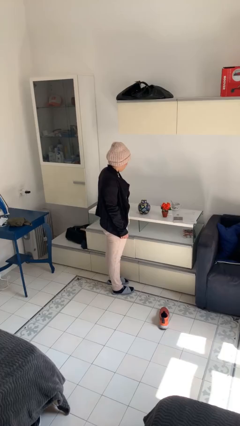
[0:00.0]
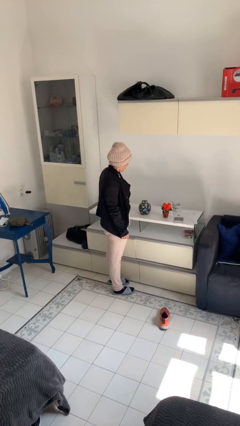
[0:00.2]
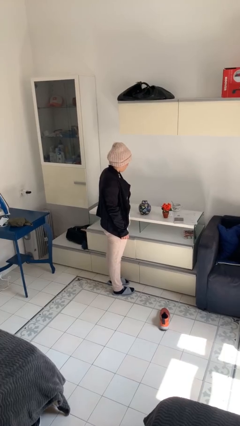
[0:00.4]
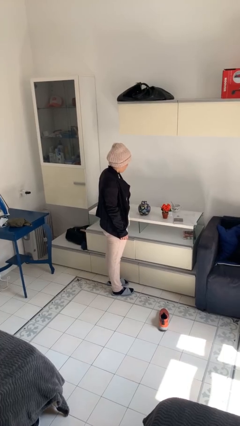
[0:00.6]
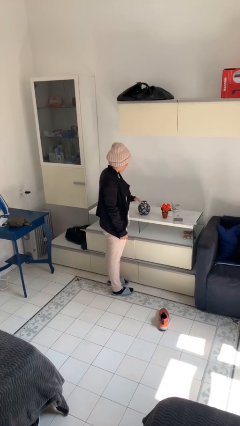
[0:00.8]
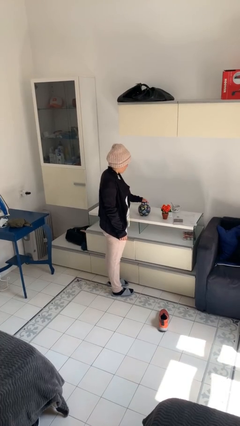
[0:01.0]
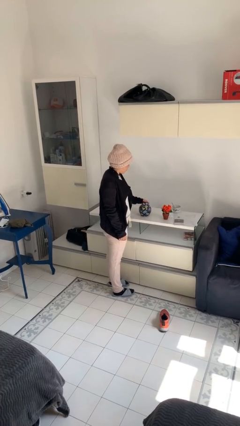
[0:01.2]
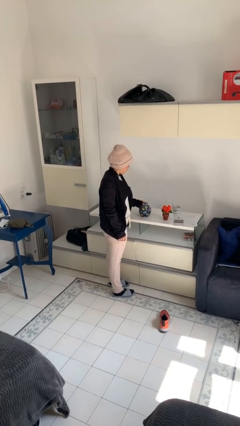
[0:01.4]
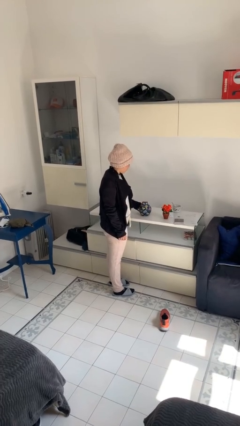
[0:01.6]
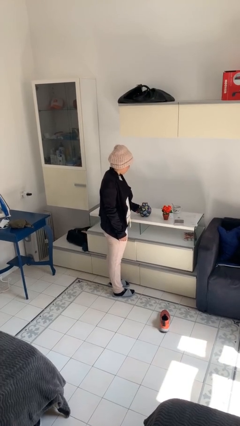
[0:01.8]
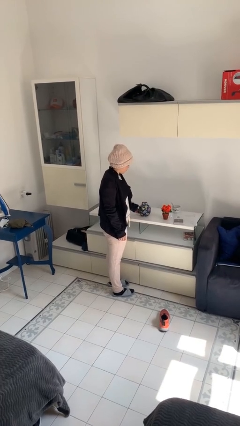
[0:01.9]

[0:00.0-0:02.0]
person waves hand over object

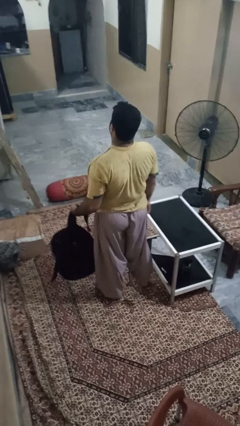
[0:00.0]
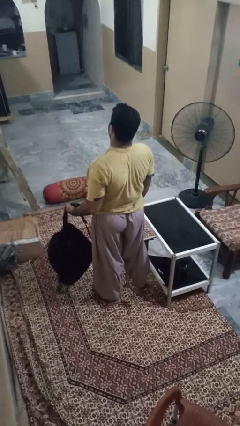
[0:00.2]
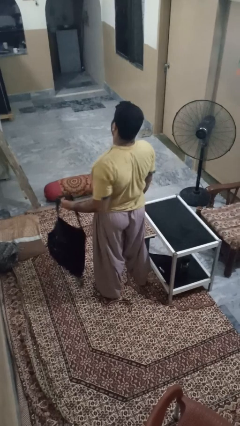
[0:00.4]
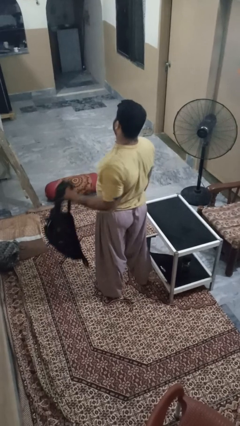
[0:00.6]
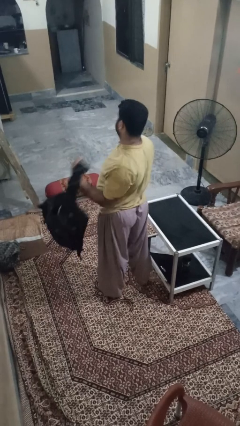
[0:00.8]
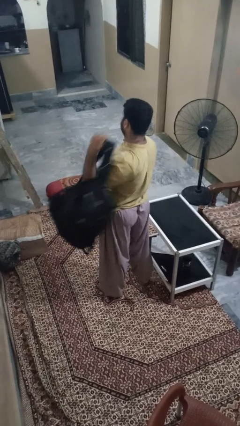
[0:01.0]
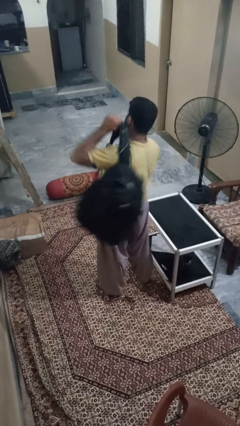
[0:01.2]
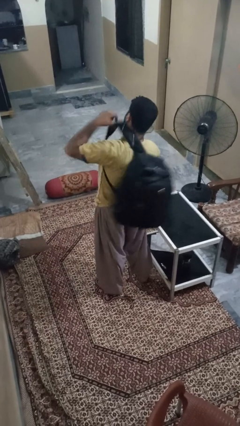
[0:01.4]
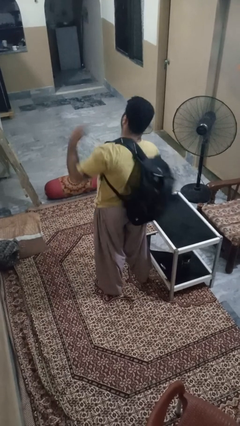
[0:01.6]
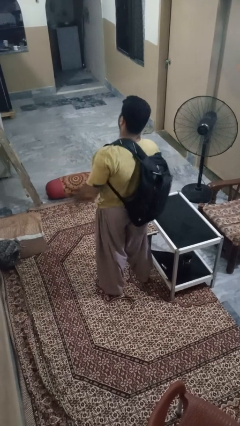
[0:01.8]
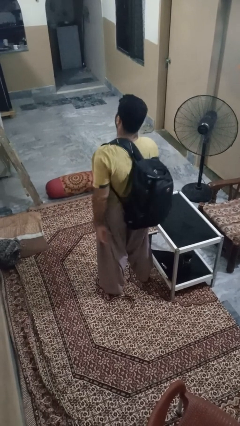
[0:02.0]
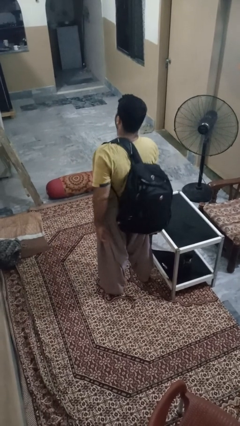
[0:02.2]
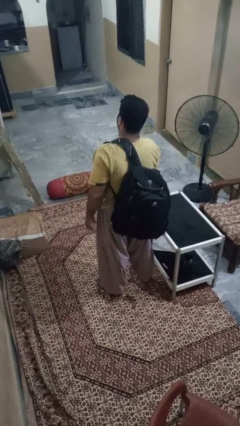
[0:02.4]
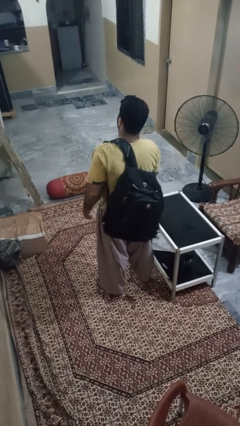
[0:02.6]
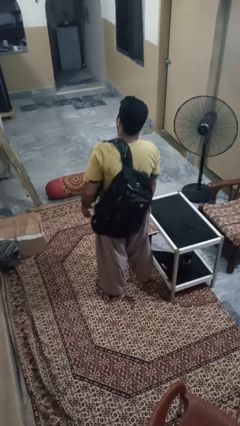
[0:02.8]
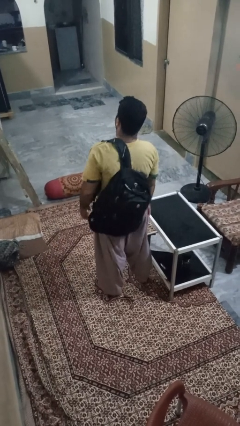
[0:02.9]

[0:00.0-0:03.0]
person puts on backpack

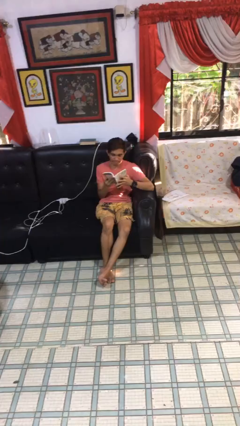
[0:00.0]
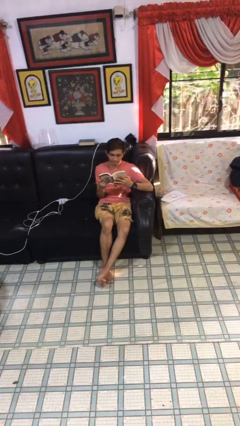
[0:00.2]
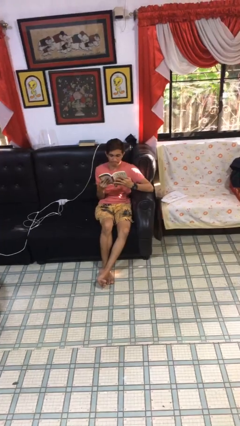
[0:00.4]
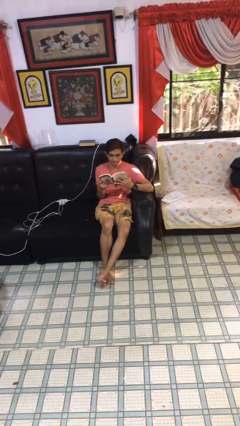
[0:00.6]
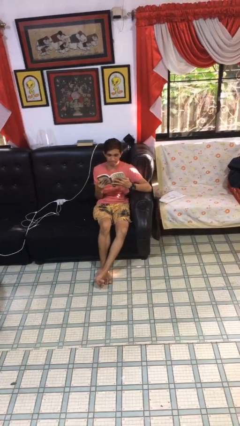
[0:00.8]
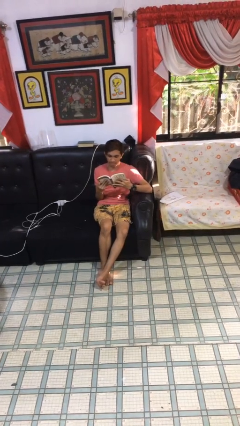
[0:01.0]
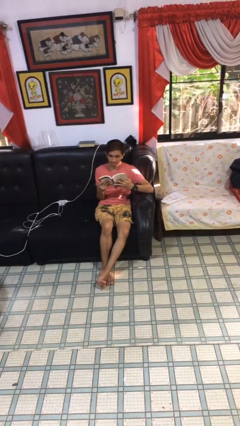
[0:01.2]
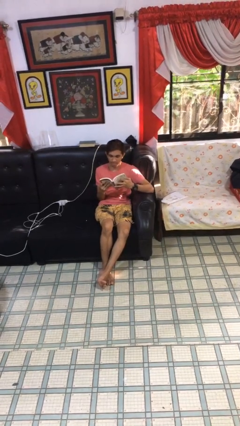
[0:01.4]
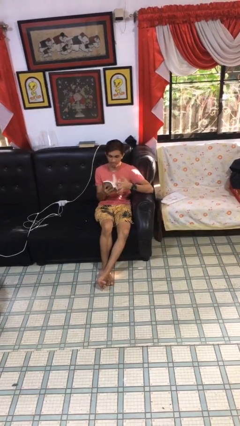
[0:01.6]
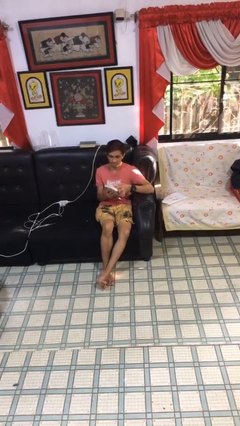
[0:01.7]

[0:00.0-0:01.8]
person reads document

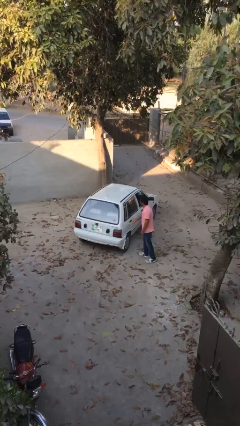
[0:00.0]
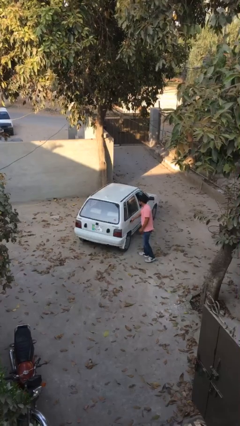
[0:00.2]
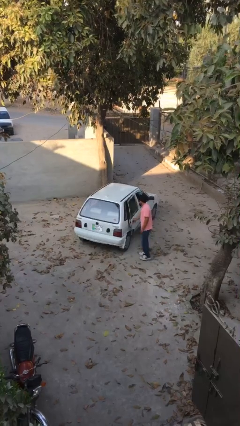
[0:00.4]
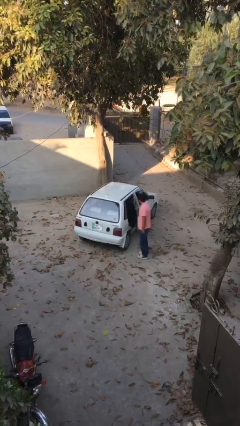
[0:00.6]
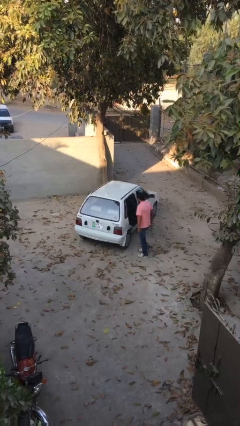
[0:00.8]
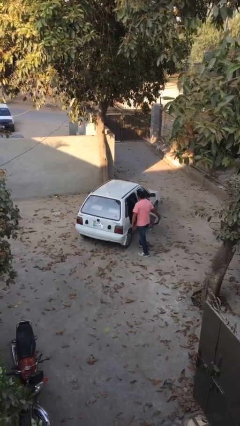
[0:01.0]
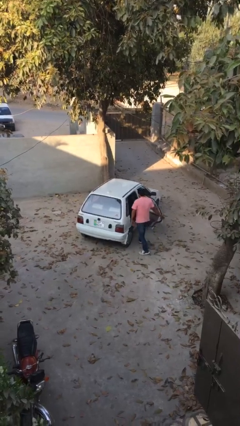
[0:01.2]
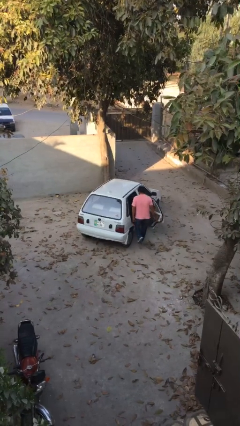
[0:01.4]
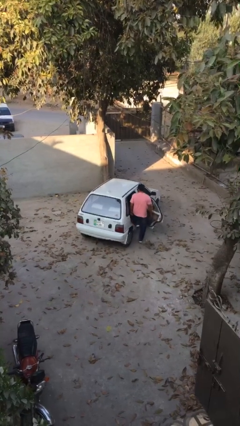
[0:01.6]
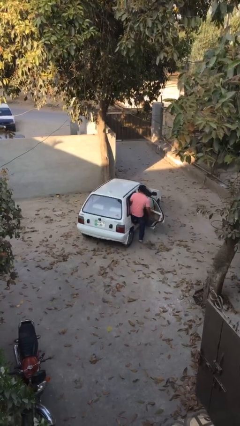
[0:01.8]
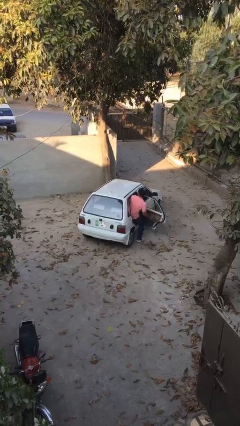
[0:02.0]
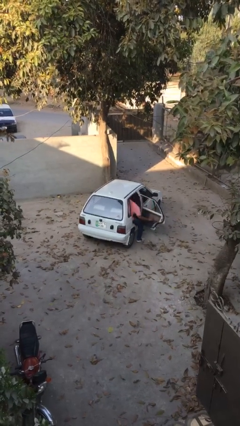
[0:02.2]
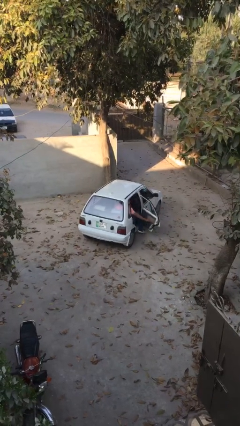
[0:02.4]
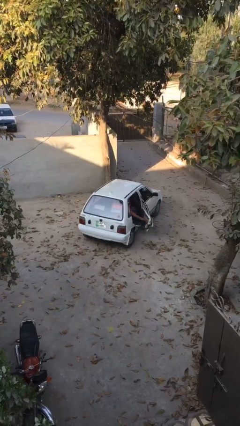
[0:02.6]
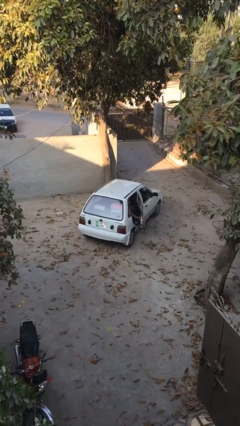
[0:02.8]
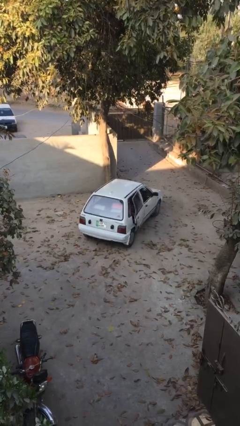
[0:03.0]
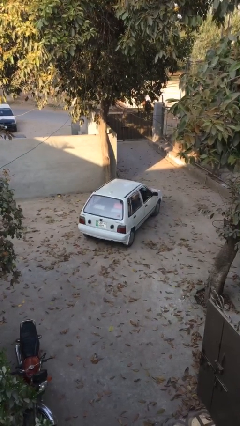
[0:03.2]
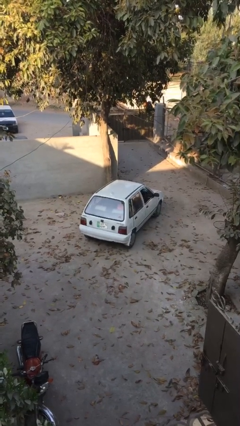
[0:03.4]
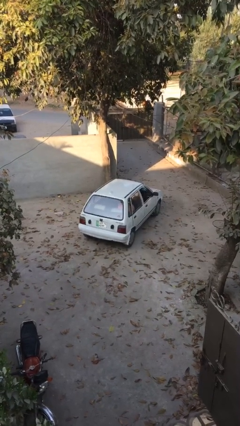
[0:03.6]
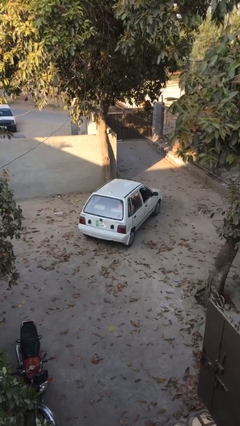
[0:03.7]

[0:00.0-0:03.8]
car picks up person

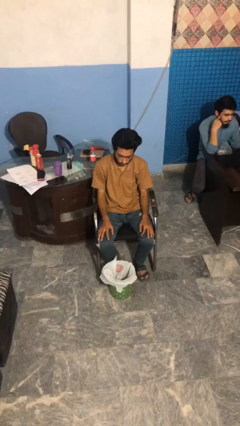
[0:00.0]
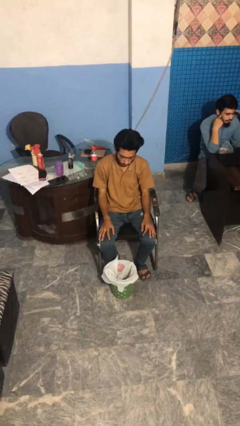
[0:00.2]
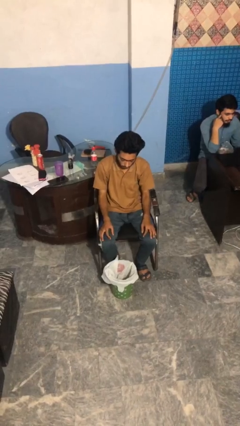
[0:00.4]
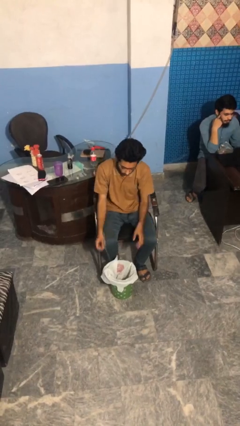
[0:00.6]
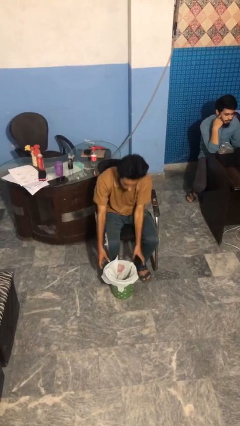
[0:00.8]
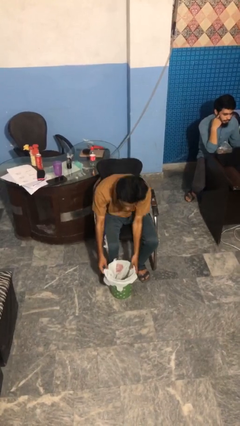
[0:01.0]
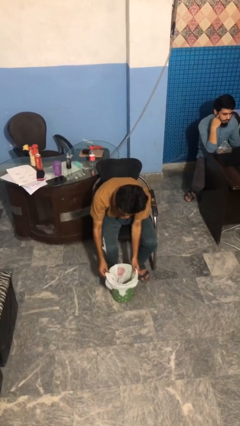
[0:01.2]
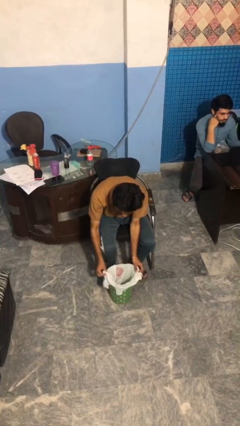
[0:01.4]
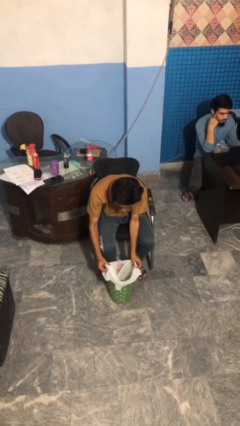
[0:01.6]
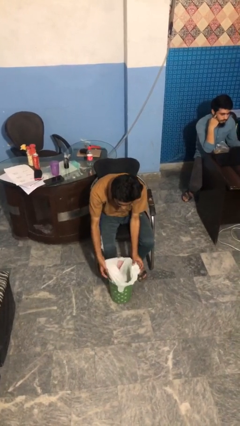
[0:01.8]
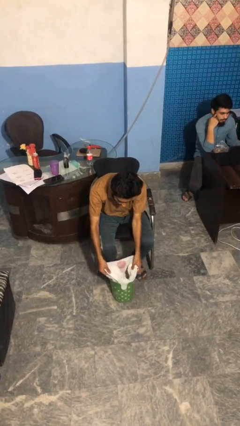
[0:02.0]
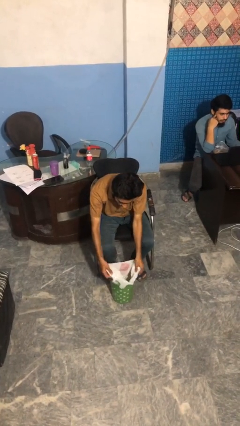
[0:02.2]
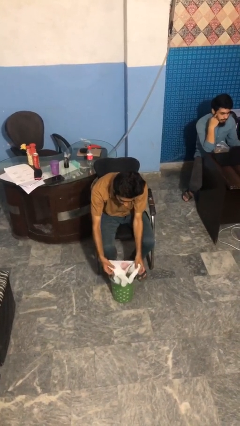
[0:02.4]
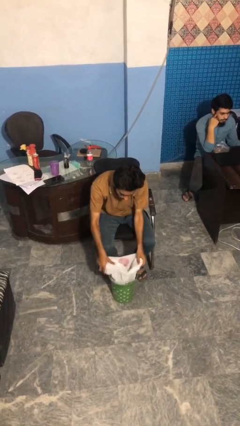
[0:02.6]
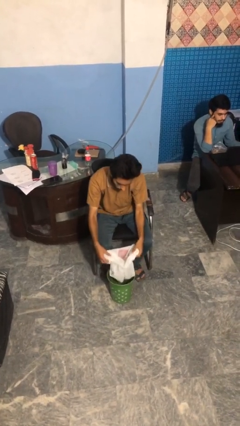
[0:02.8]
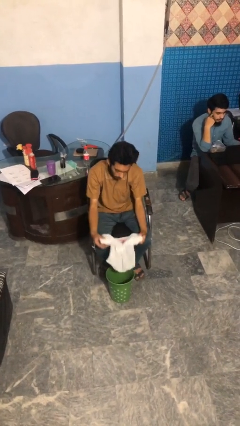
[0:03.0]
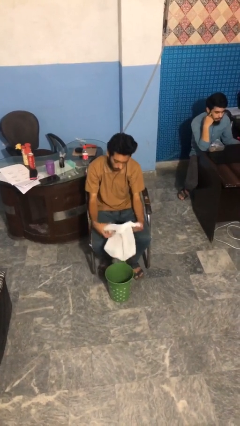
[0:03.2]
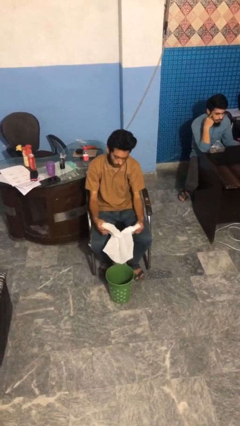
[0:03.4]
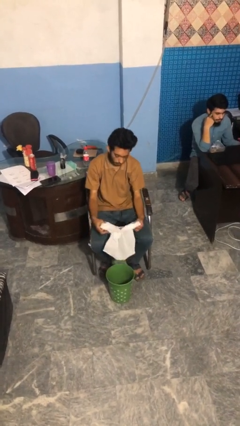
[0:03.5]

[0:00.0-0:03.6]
person removes trashbag from trashcan

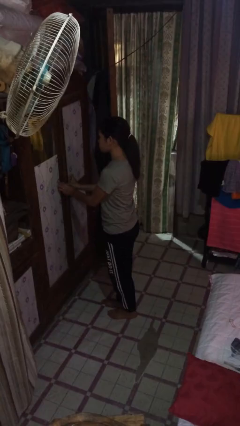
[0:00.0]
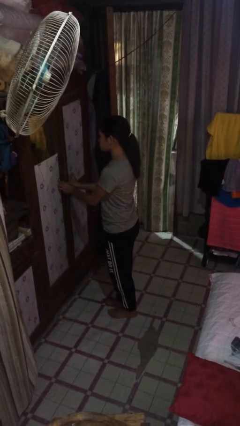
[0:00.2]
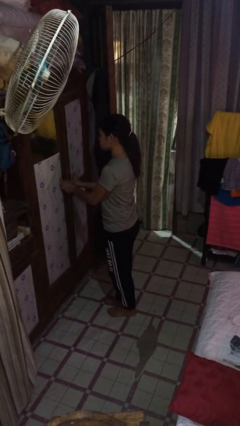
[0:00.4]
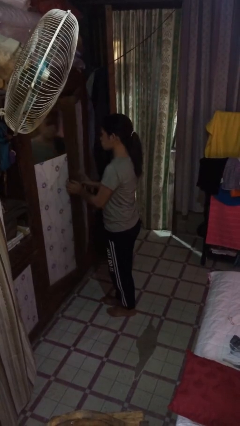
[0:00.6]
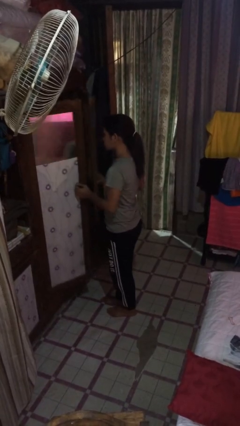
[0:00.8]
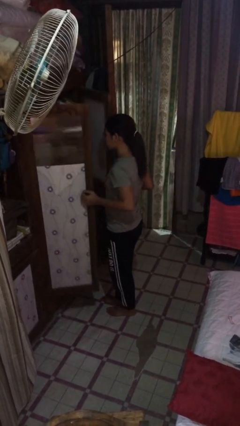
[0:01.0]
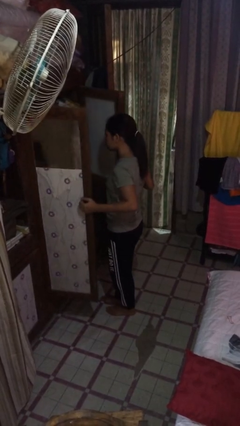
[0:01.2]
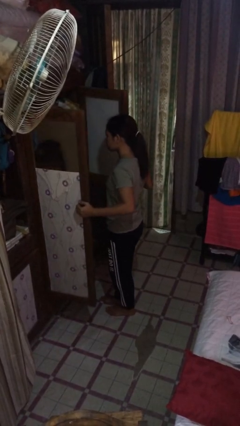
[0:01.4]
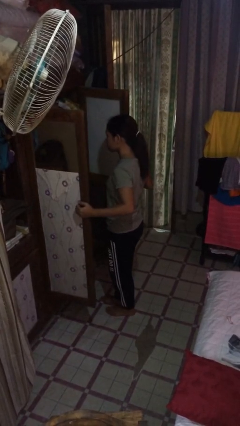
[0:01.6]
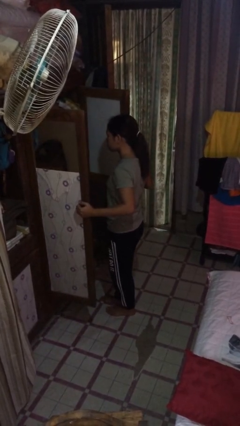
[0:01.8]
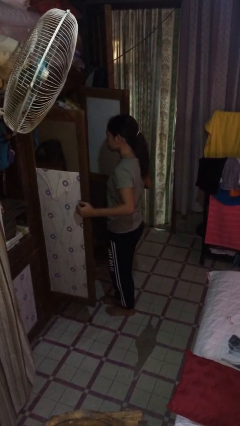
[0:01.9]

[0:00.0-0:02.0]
person opens closet door

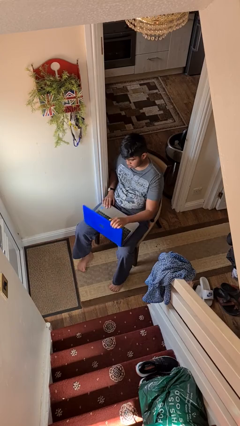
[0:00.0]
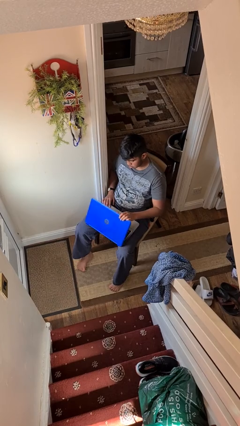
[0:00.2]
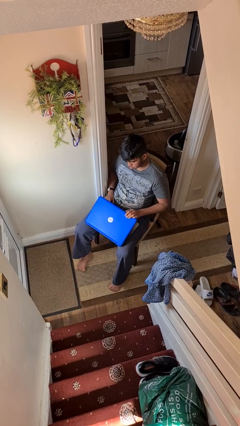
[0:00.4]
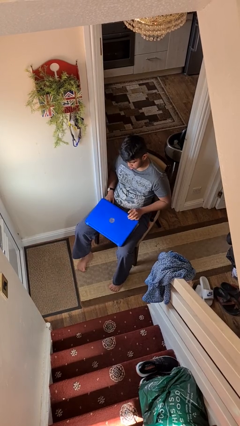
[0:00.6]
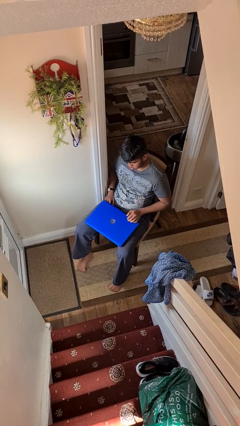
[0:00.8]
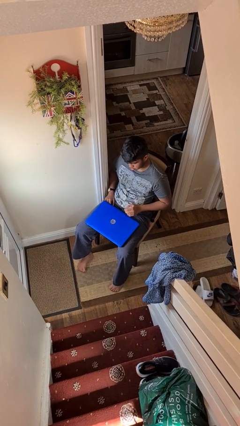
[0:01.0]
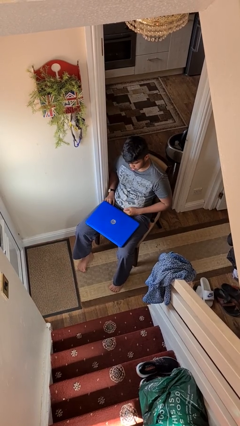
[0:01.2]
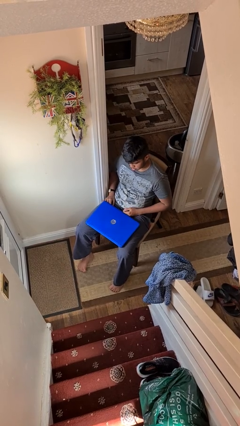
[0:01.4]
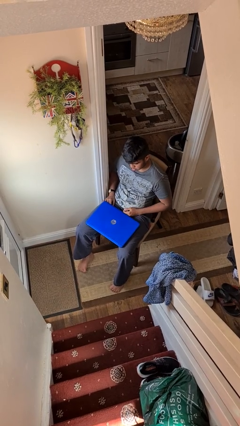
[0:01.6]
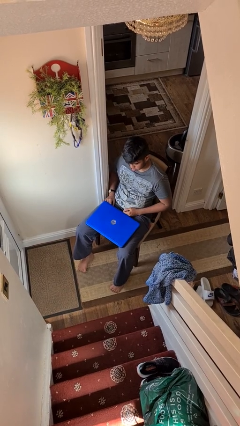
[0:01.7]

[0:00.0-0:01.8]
person closes laptop
